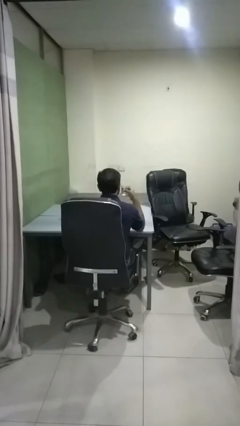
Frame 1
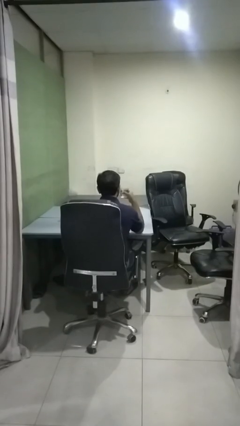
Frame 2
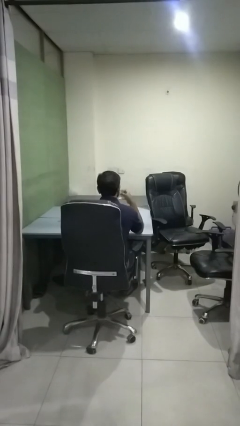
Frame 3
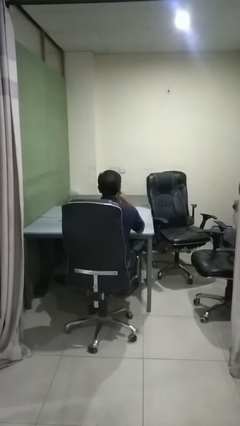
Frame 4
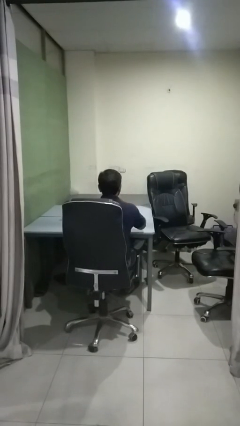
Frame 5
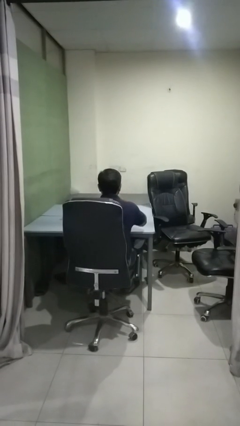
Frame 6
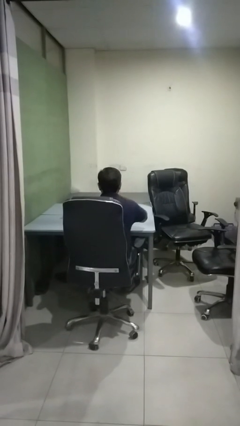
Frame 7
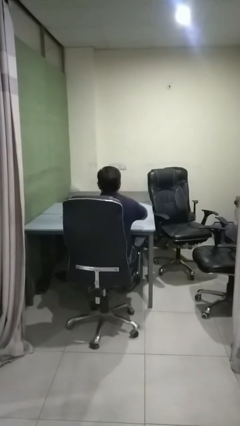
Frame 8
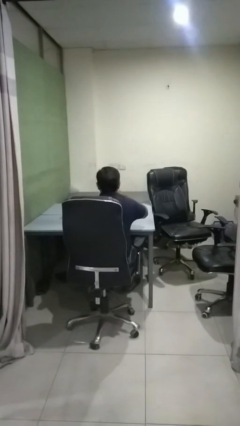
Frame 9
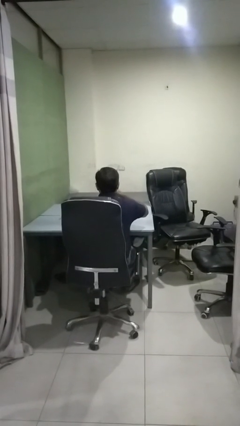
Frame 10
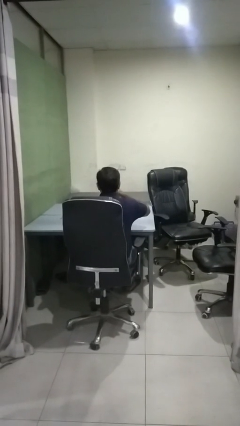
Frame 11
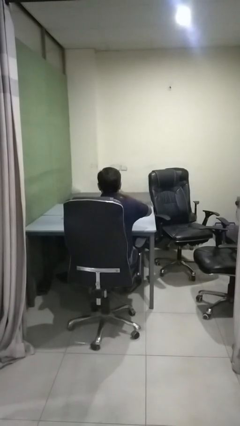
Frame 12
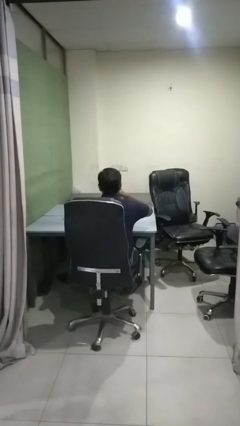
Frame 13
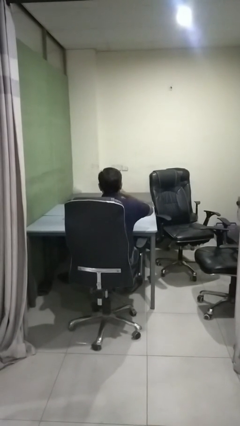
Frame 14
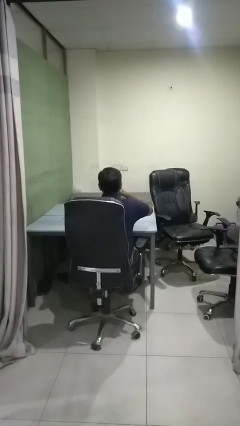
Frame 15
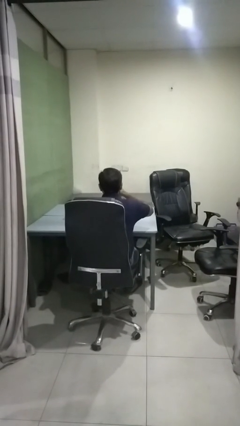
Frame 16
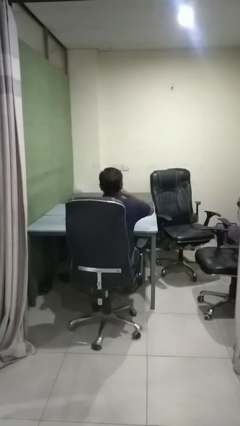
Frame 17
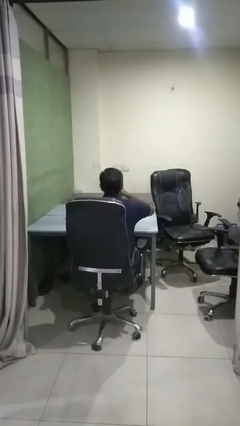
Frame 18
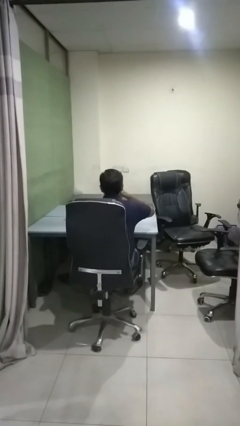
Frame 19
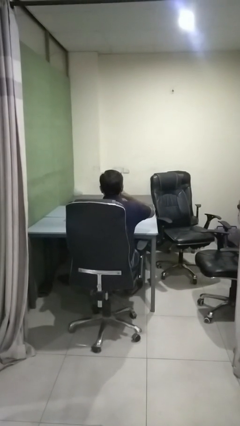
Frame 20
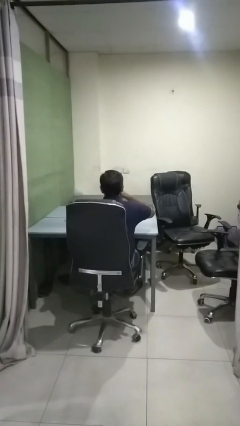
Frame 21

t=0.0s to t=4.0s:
person drinks from shotglass

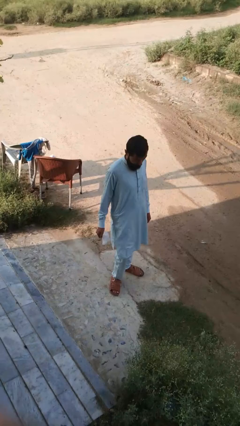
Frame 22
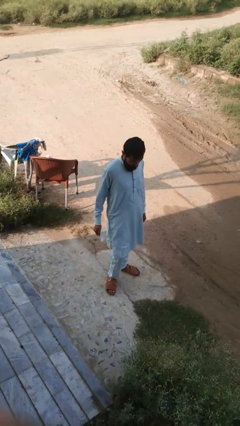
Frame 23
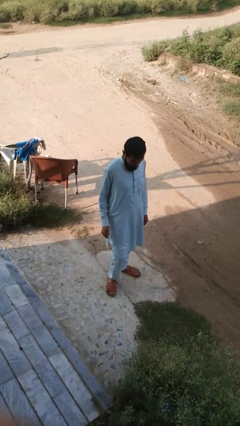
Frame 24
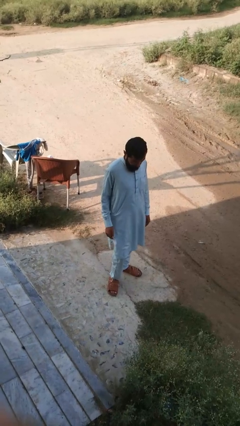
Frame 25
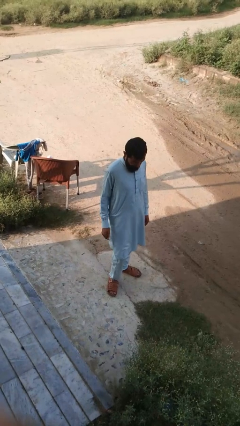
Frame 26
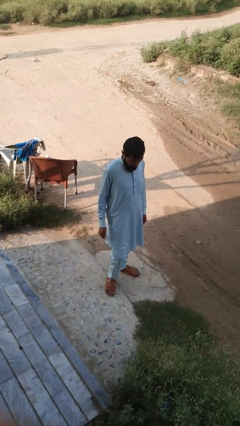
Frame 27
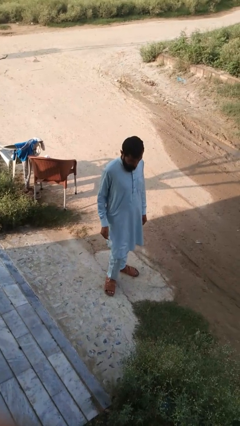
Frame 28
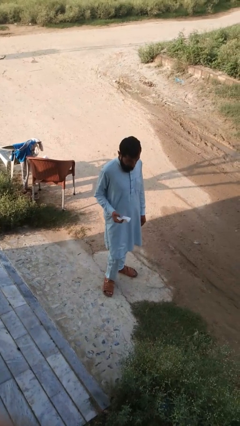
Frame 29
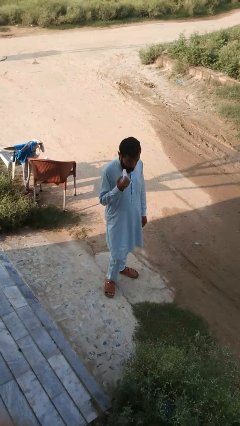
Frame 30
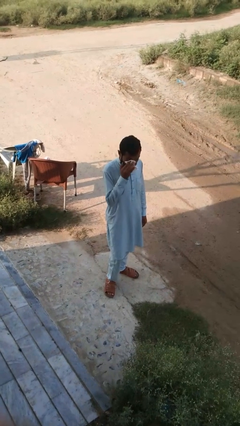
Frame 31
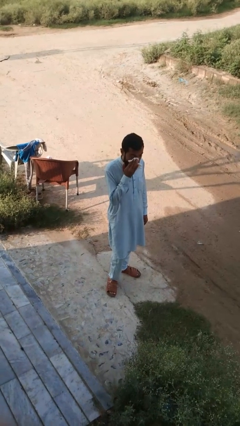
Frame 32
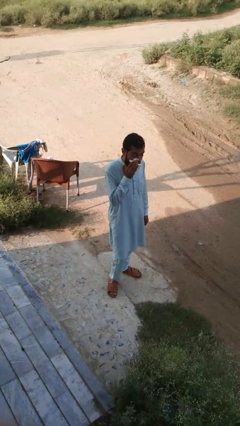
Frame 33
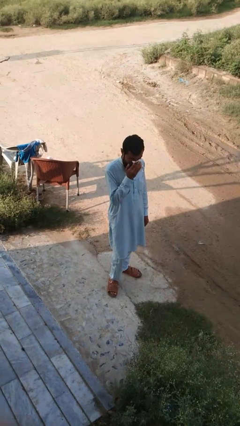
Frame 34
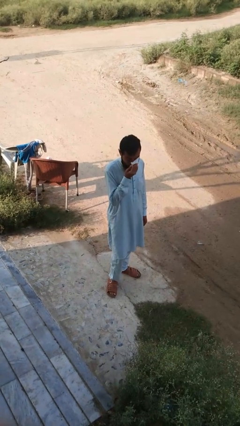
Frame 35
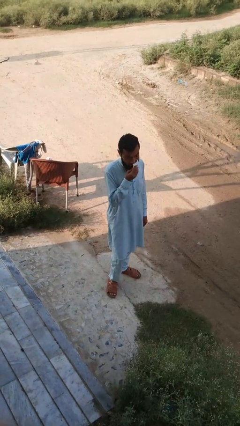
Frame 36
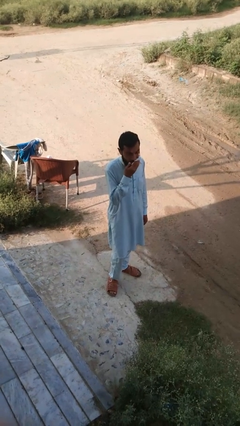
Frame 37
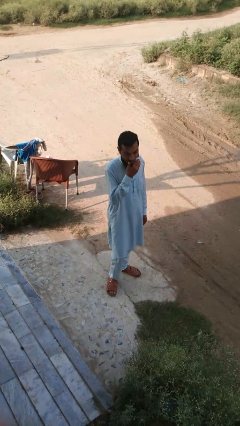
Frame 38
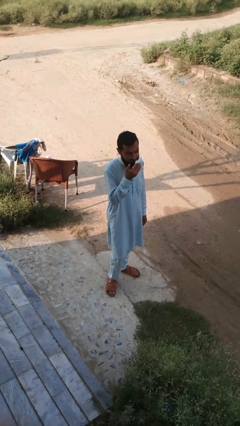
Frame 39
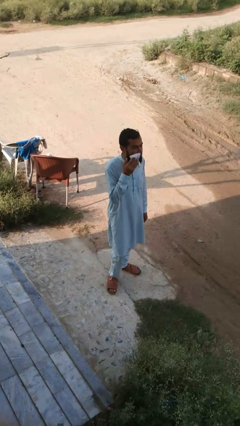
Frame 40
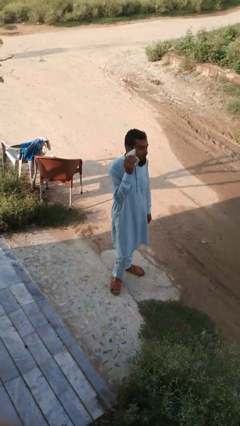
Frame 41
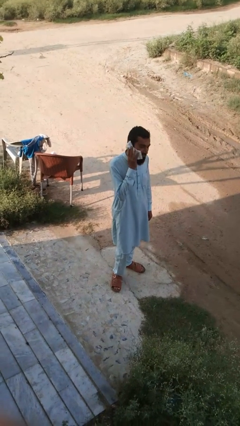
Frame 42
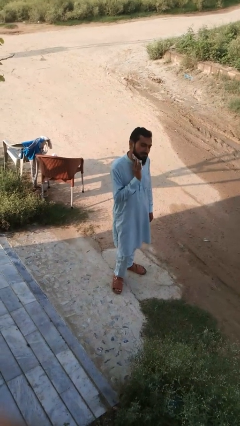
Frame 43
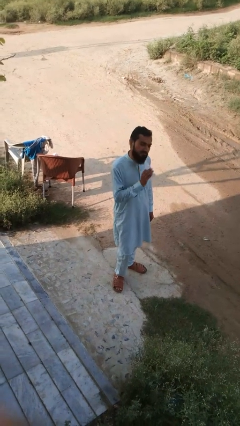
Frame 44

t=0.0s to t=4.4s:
person wipes mouth with napkin

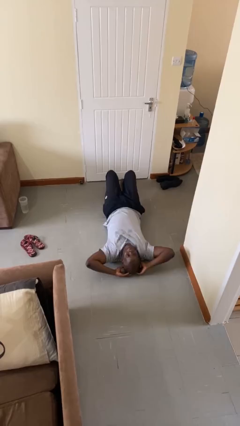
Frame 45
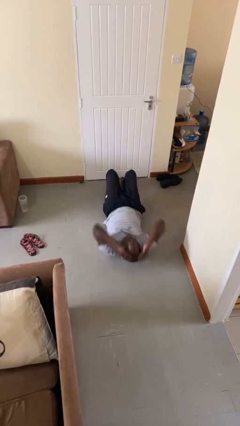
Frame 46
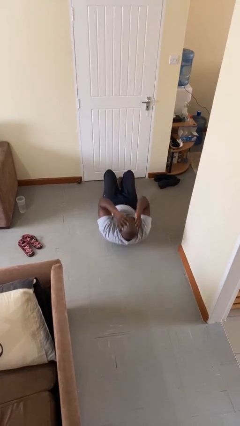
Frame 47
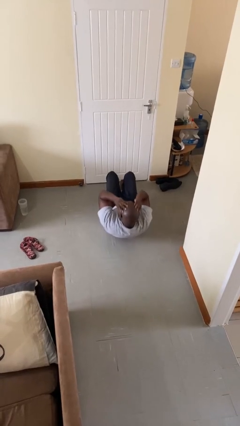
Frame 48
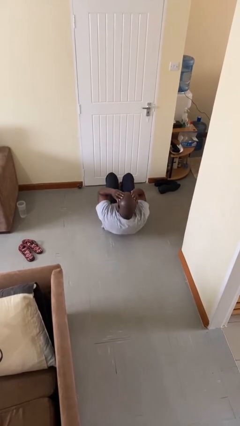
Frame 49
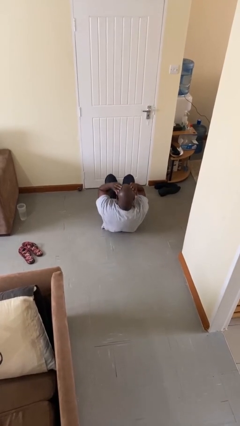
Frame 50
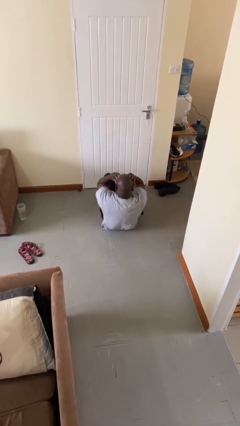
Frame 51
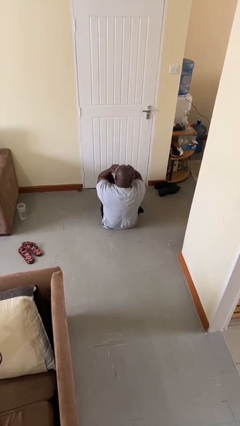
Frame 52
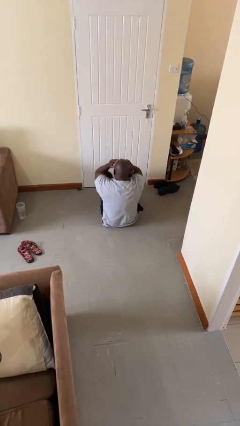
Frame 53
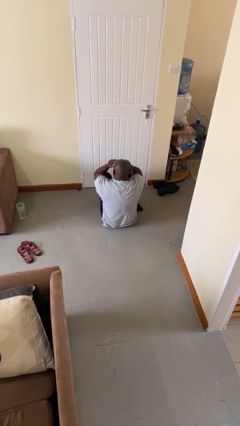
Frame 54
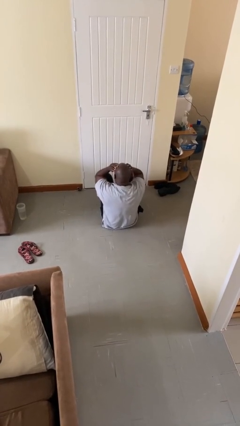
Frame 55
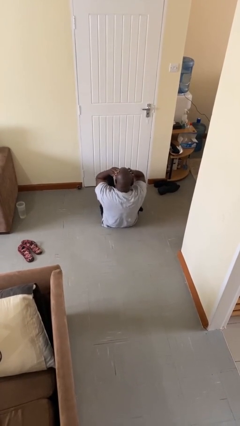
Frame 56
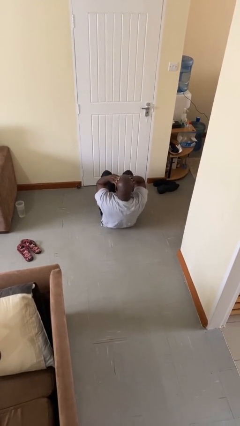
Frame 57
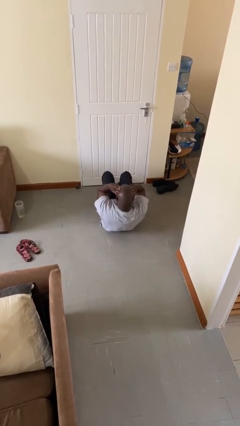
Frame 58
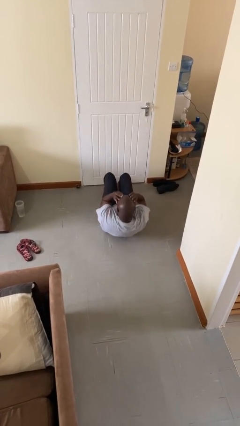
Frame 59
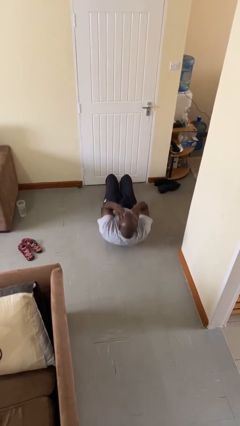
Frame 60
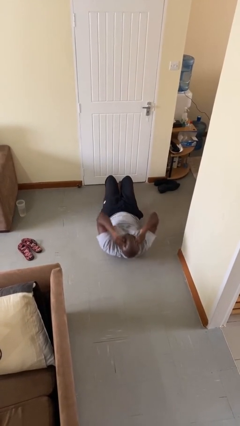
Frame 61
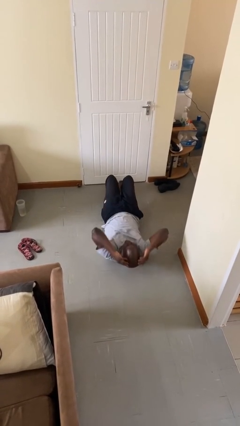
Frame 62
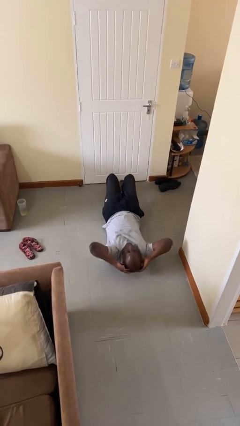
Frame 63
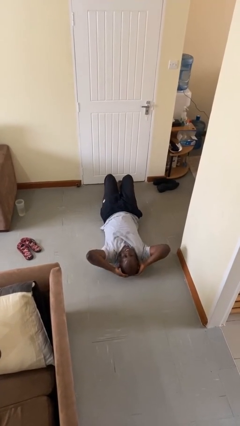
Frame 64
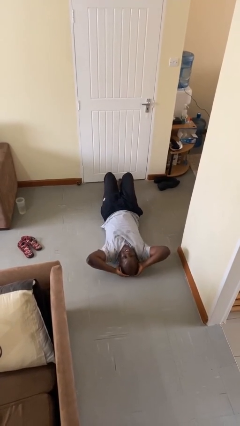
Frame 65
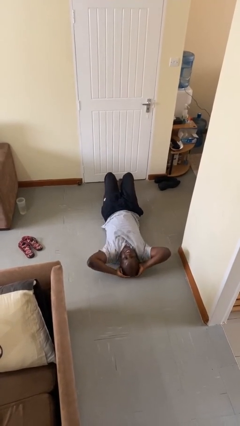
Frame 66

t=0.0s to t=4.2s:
person exercises with situp

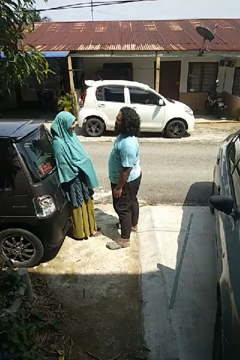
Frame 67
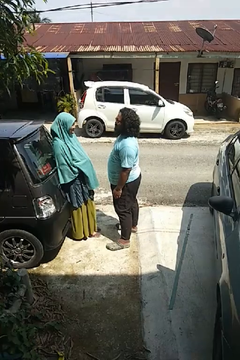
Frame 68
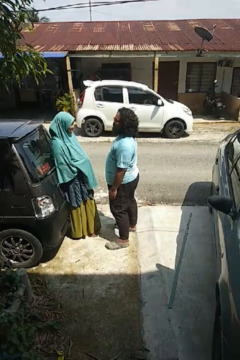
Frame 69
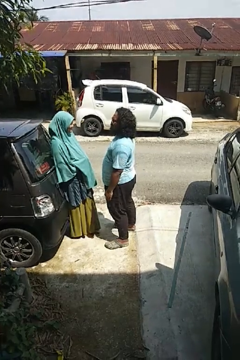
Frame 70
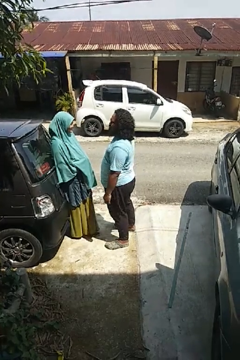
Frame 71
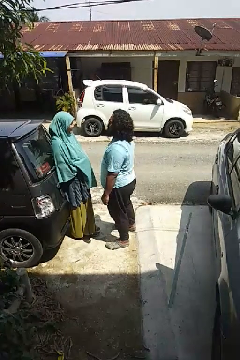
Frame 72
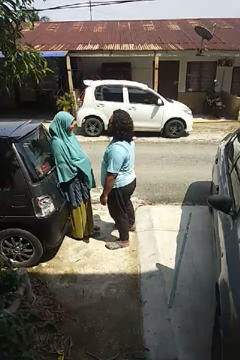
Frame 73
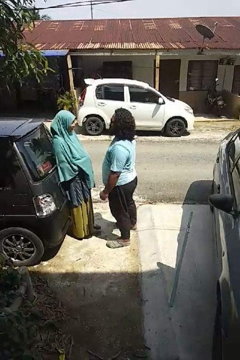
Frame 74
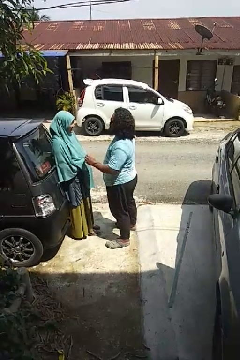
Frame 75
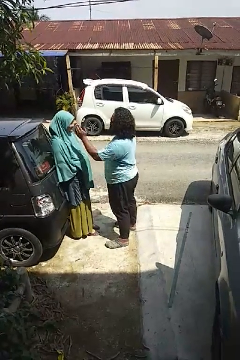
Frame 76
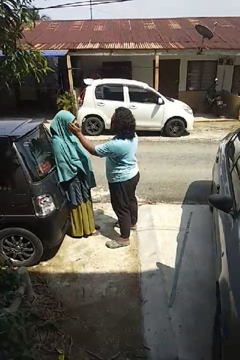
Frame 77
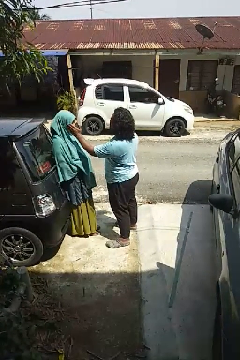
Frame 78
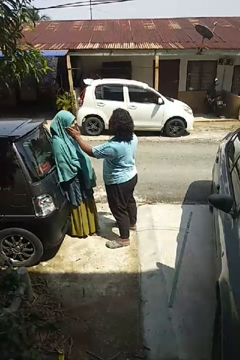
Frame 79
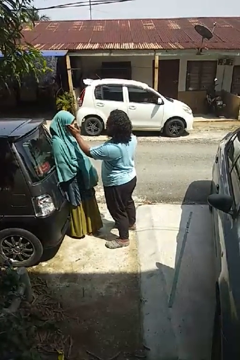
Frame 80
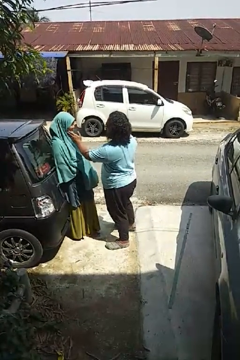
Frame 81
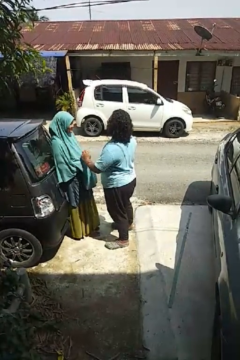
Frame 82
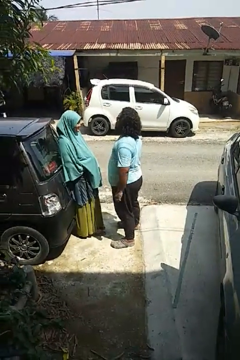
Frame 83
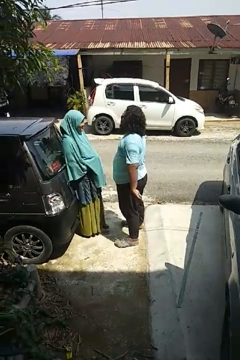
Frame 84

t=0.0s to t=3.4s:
person touches face of person

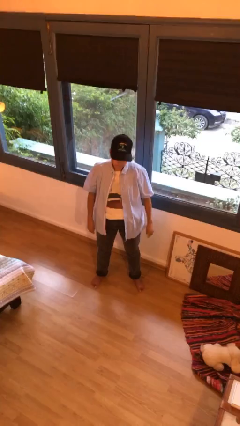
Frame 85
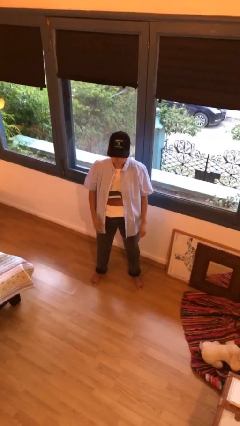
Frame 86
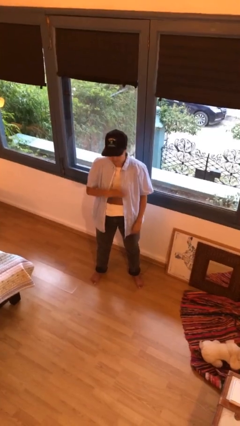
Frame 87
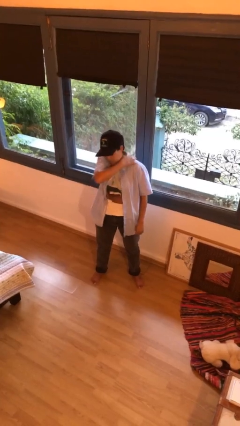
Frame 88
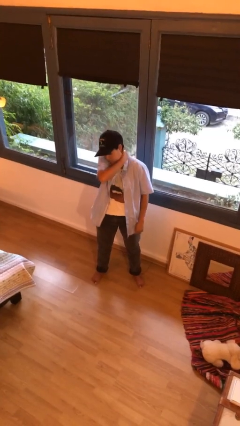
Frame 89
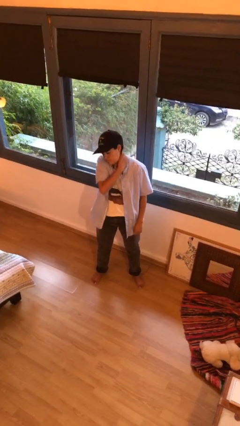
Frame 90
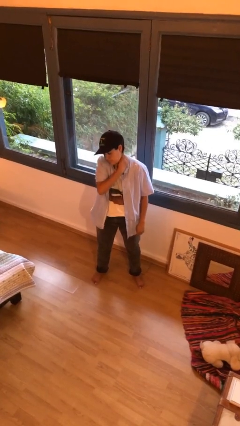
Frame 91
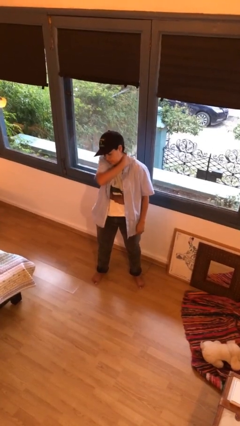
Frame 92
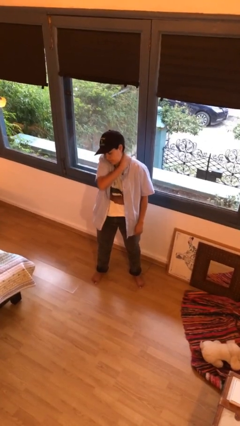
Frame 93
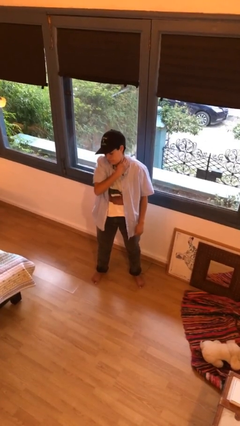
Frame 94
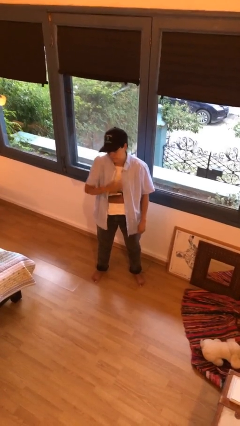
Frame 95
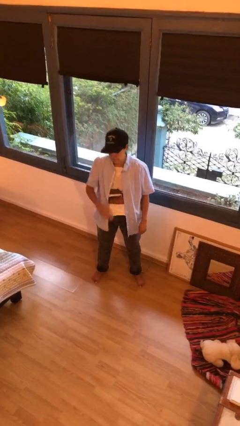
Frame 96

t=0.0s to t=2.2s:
person rubs neck
